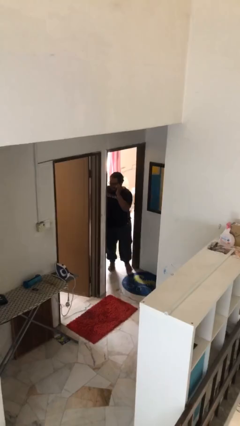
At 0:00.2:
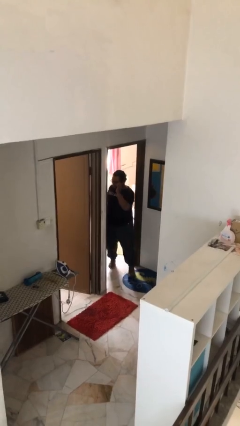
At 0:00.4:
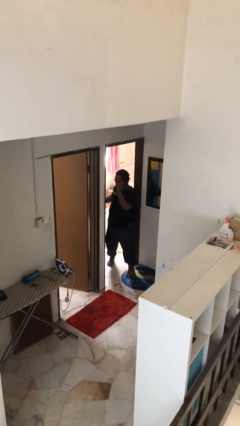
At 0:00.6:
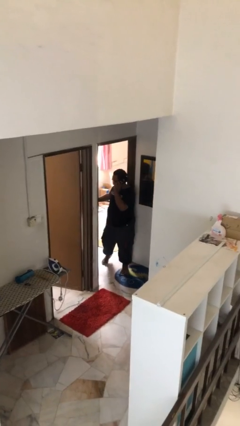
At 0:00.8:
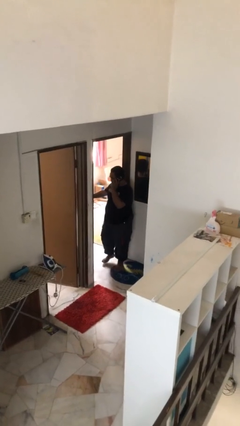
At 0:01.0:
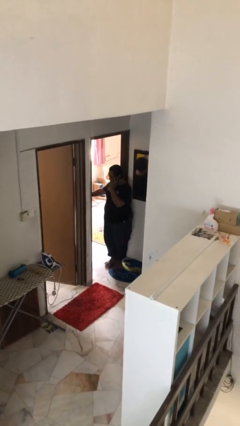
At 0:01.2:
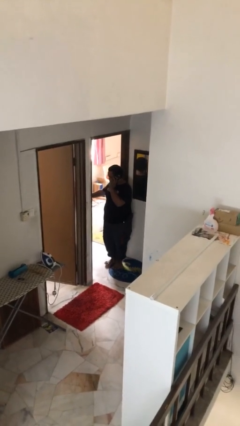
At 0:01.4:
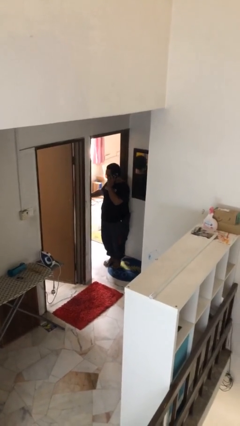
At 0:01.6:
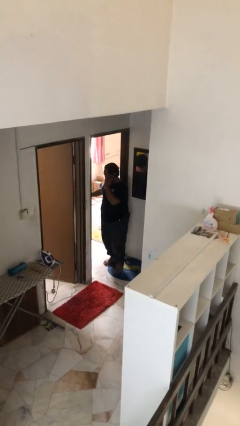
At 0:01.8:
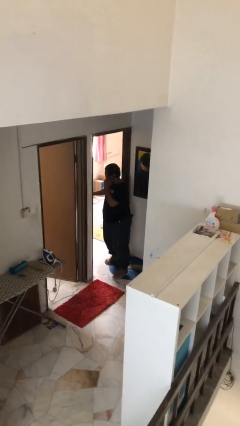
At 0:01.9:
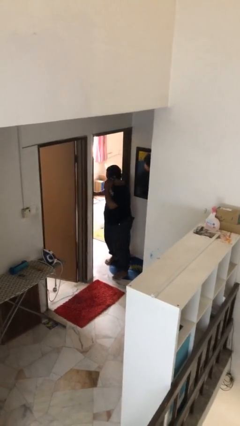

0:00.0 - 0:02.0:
person enters scene through structure

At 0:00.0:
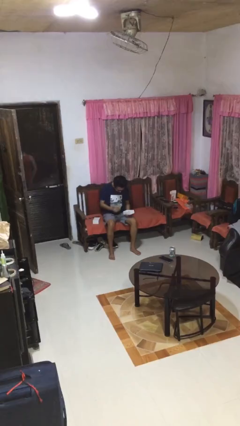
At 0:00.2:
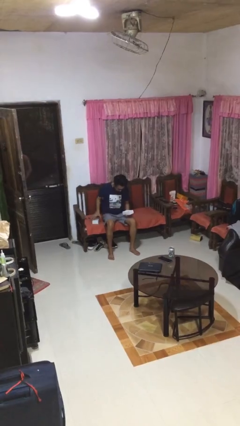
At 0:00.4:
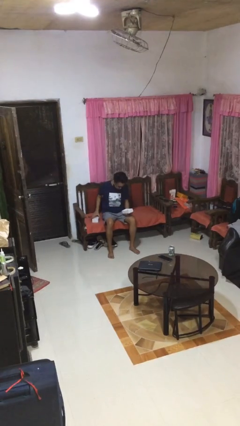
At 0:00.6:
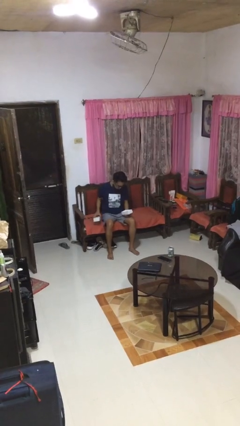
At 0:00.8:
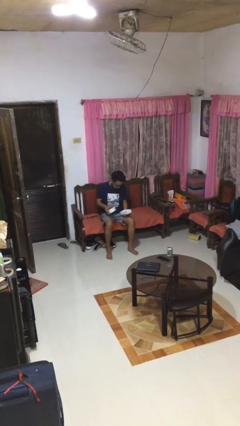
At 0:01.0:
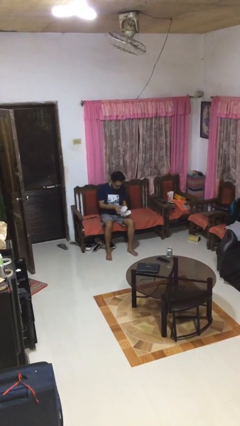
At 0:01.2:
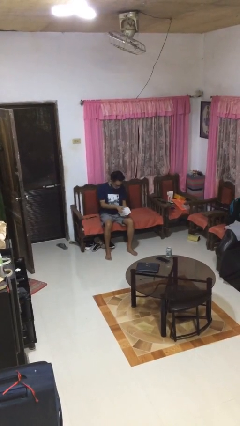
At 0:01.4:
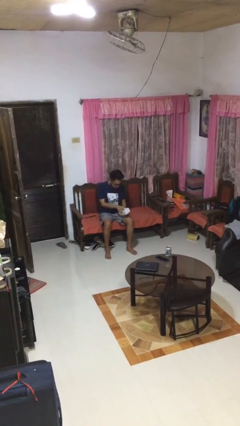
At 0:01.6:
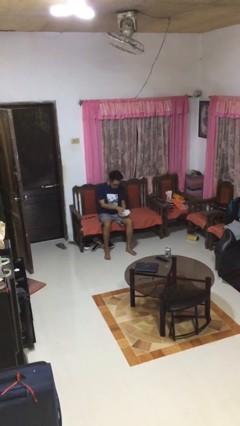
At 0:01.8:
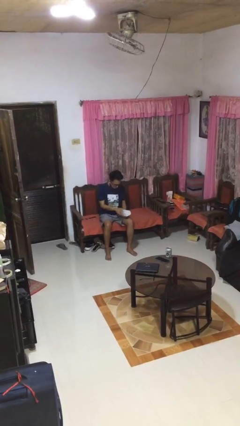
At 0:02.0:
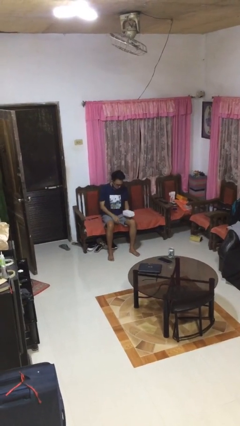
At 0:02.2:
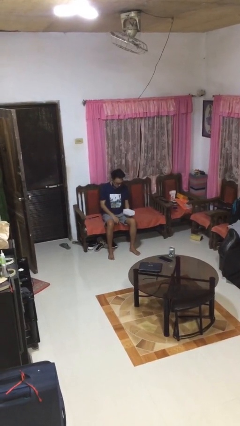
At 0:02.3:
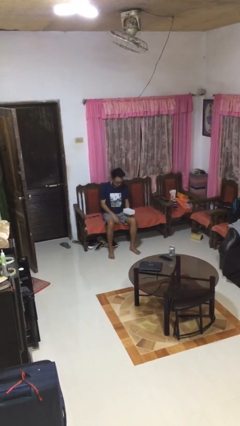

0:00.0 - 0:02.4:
person closes jewelry box

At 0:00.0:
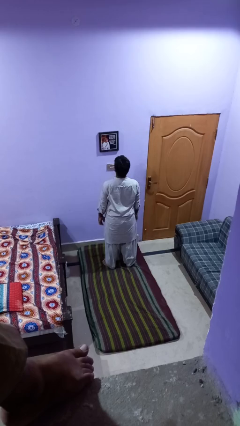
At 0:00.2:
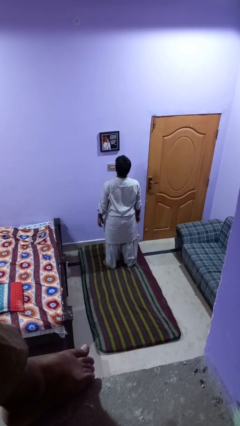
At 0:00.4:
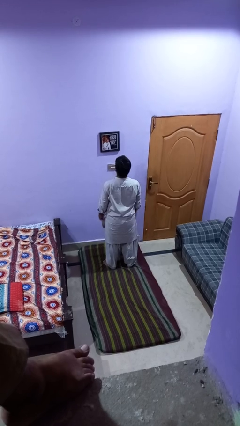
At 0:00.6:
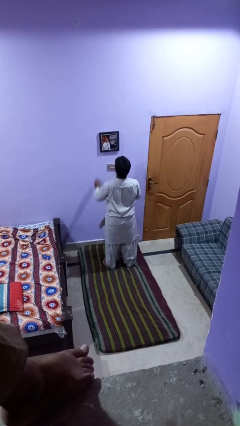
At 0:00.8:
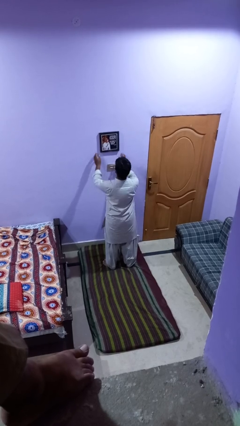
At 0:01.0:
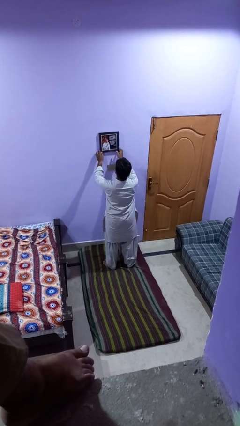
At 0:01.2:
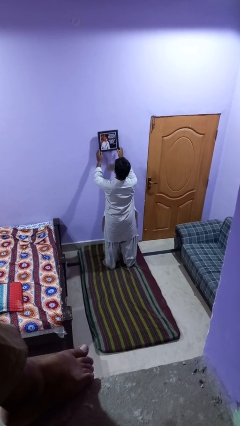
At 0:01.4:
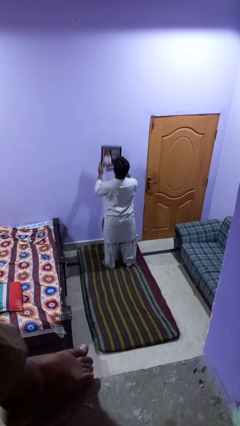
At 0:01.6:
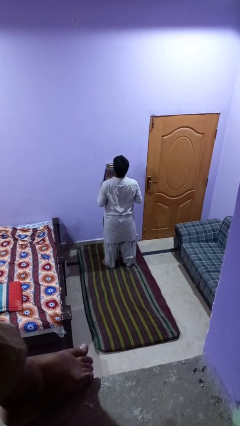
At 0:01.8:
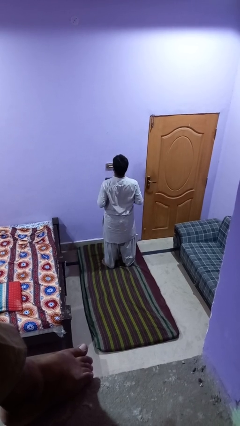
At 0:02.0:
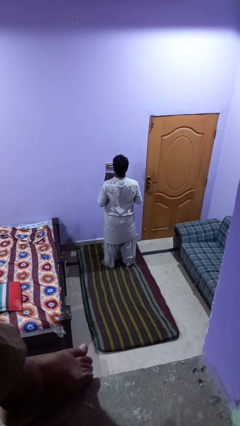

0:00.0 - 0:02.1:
person takes down picture frame

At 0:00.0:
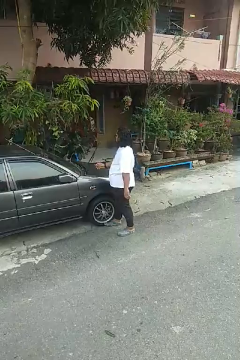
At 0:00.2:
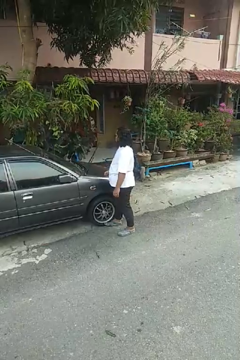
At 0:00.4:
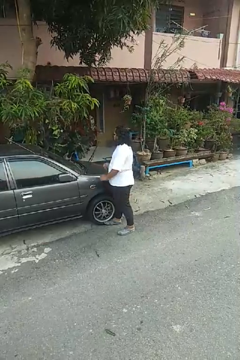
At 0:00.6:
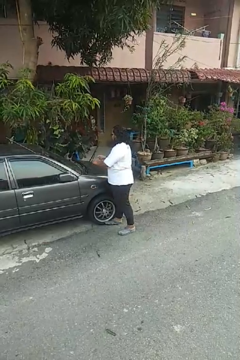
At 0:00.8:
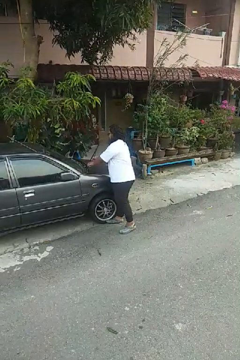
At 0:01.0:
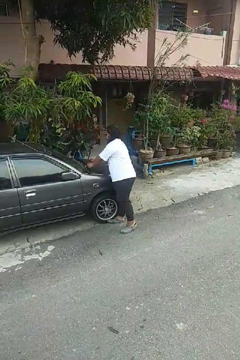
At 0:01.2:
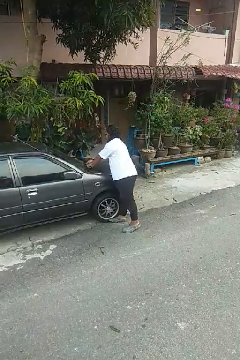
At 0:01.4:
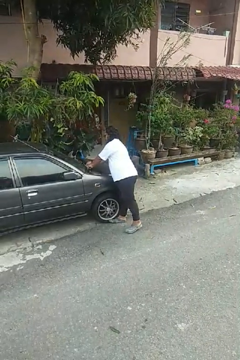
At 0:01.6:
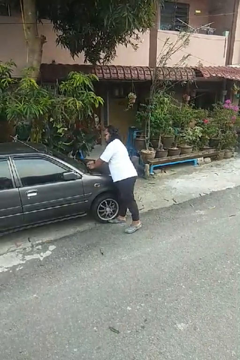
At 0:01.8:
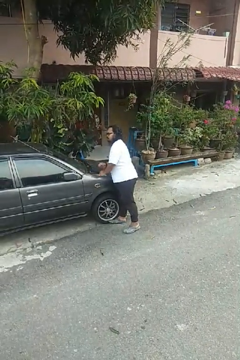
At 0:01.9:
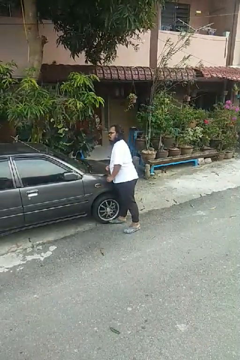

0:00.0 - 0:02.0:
person flips down car wipers

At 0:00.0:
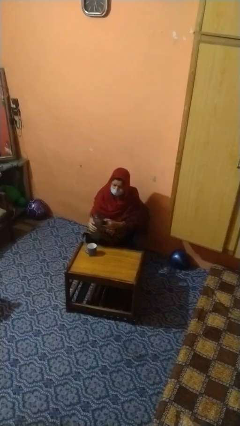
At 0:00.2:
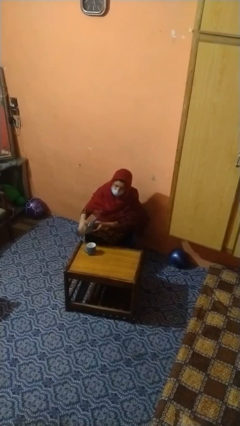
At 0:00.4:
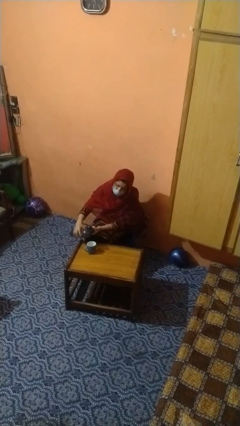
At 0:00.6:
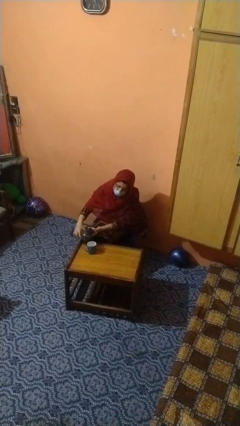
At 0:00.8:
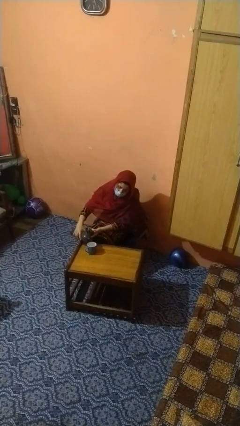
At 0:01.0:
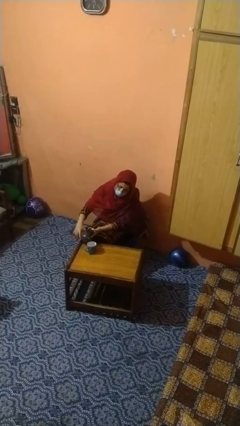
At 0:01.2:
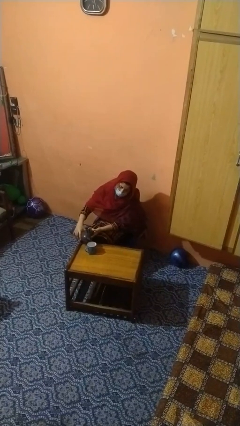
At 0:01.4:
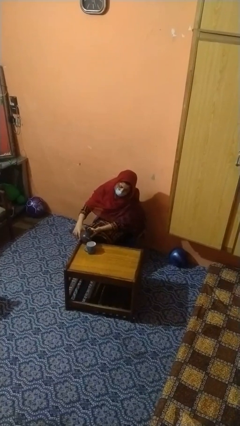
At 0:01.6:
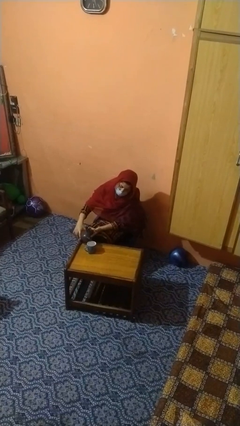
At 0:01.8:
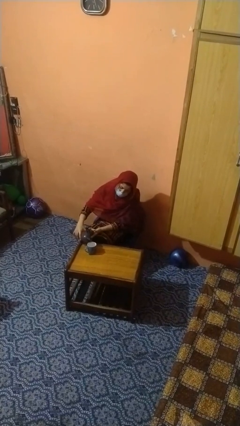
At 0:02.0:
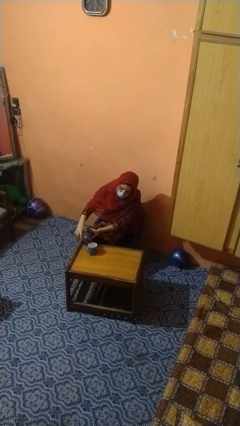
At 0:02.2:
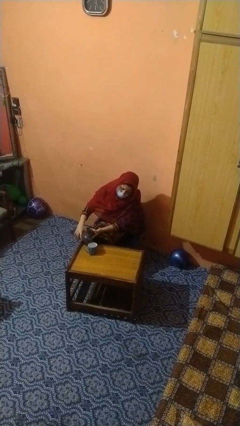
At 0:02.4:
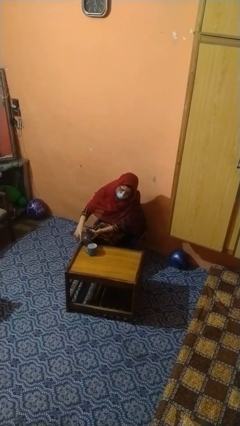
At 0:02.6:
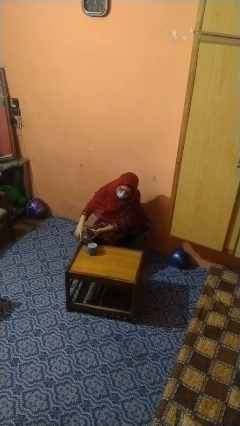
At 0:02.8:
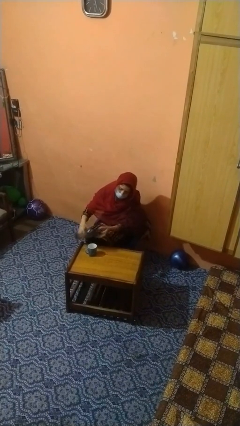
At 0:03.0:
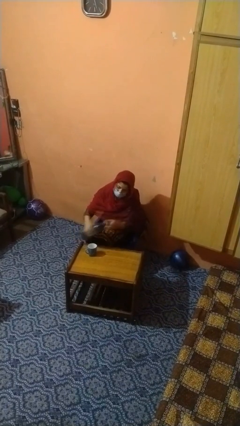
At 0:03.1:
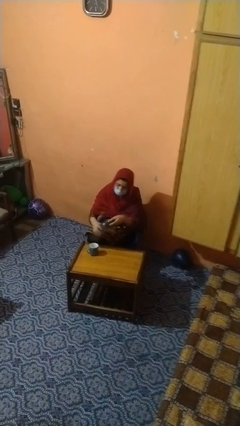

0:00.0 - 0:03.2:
person pours liquid into cup

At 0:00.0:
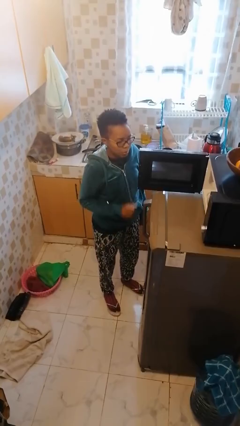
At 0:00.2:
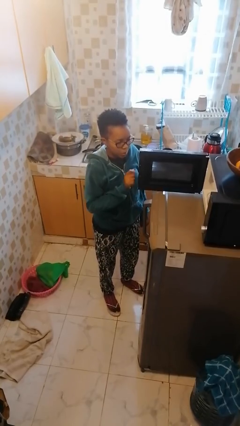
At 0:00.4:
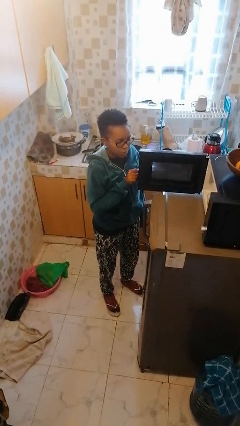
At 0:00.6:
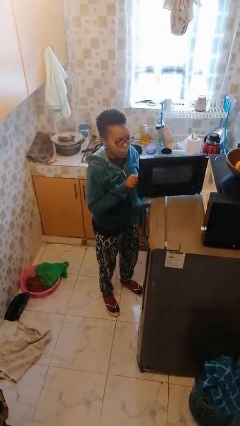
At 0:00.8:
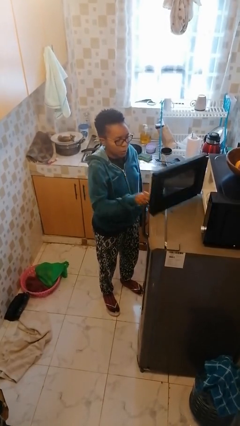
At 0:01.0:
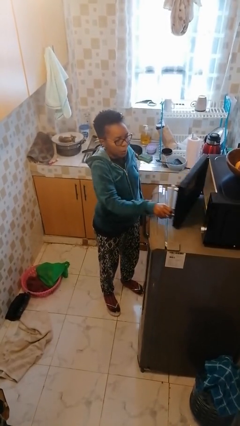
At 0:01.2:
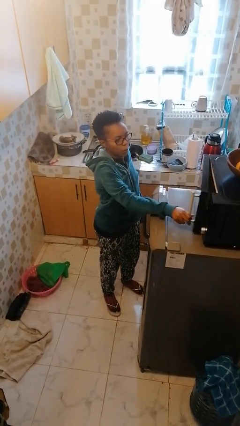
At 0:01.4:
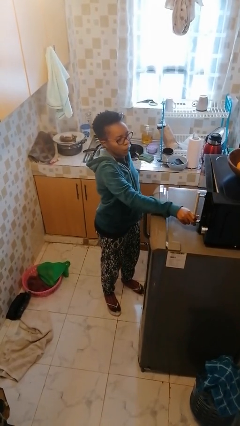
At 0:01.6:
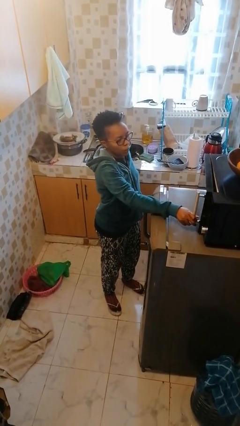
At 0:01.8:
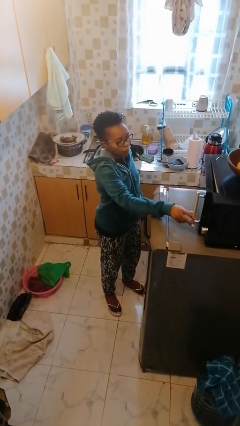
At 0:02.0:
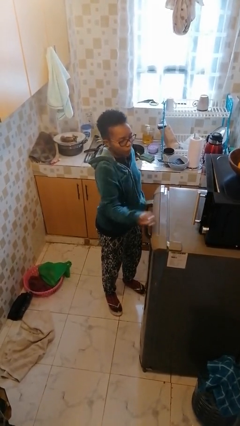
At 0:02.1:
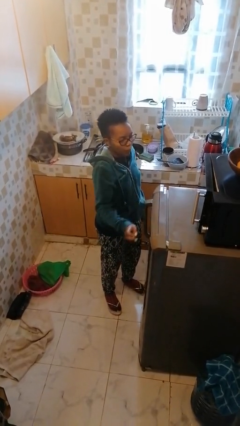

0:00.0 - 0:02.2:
person closes microwave

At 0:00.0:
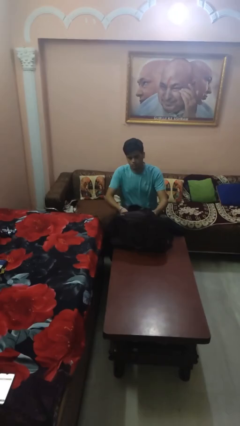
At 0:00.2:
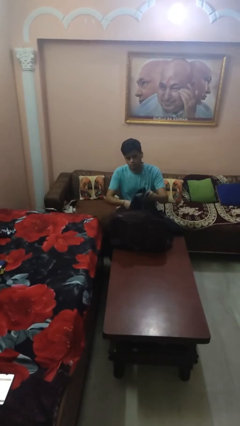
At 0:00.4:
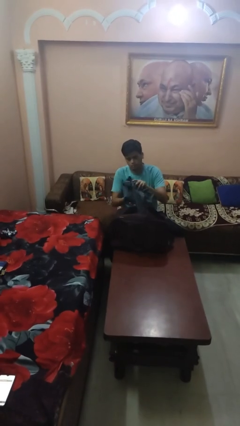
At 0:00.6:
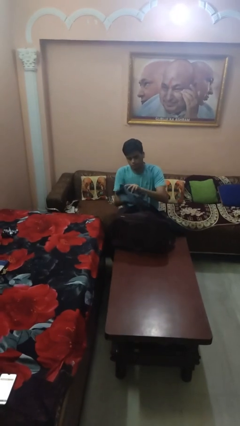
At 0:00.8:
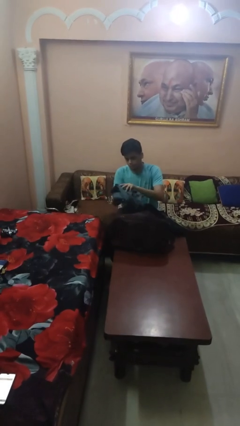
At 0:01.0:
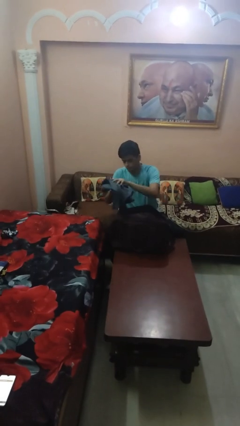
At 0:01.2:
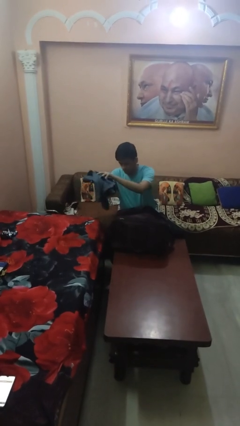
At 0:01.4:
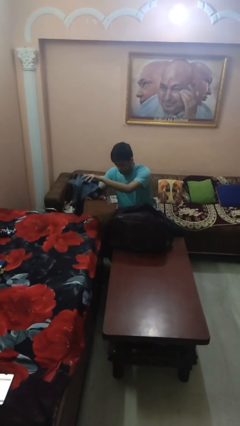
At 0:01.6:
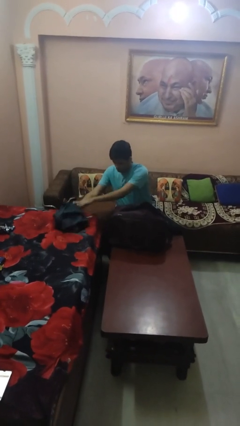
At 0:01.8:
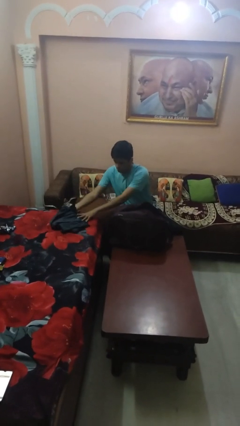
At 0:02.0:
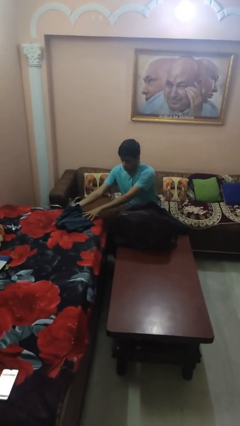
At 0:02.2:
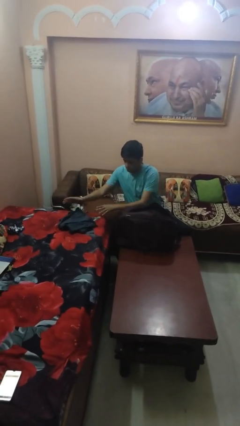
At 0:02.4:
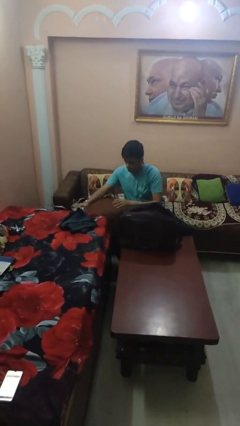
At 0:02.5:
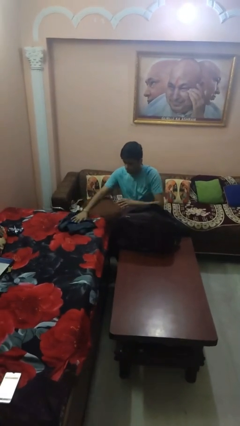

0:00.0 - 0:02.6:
person unloads clothes from suitcase

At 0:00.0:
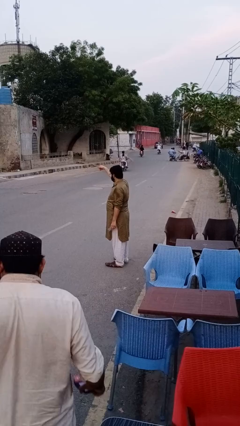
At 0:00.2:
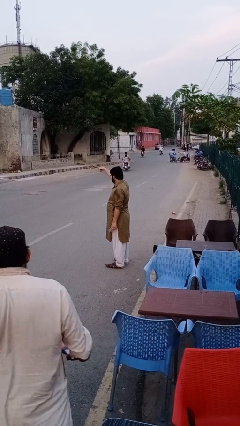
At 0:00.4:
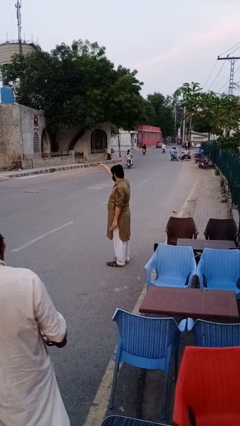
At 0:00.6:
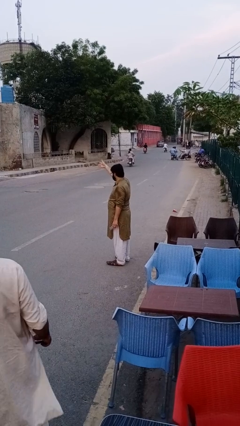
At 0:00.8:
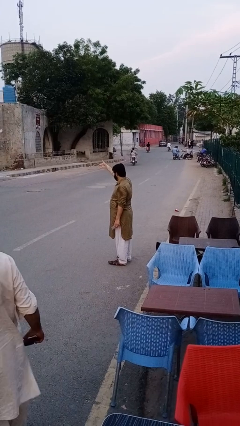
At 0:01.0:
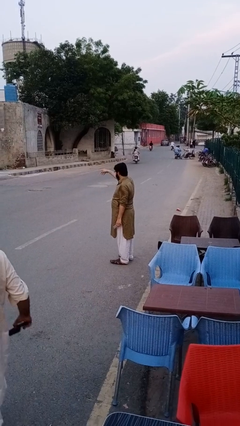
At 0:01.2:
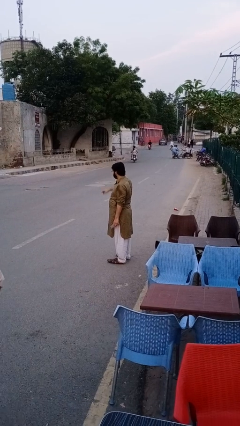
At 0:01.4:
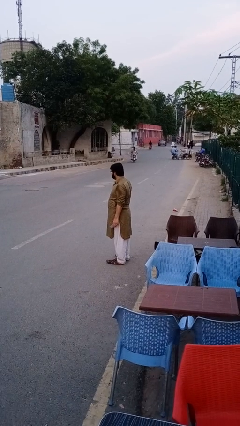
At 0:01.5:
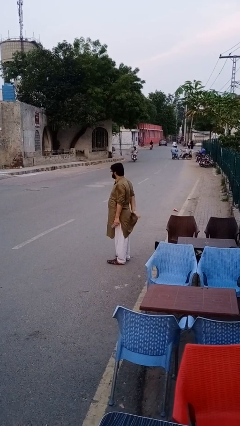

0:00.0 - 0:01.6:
person puts phone into pocket
